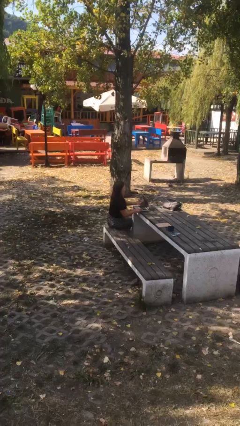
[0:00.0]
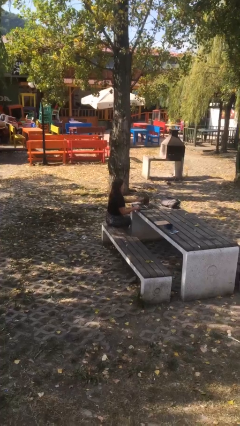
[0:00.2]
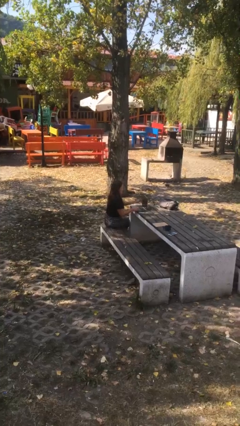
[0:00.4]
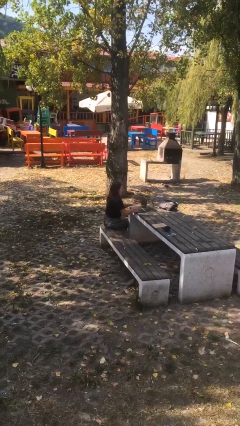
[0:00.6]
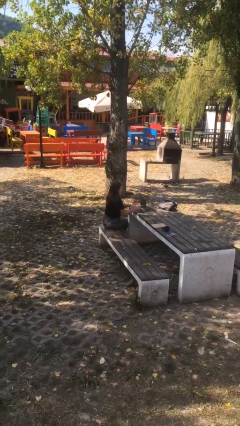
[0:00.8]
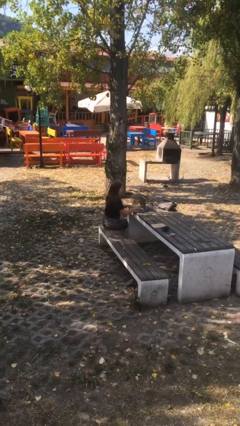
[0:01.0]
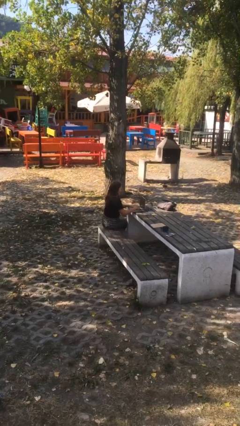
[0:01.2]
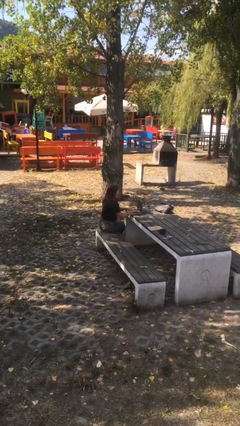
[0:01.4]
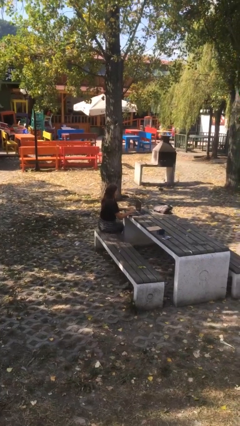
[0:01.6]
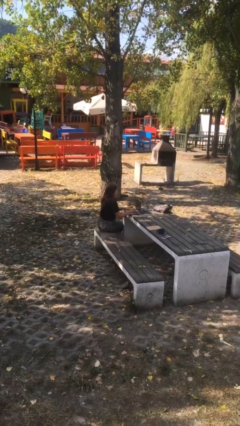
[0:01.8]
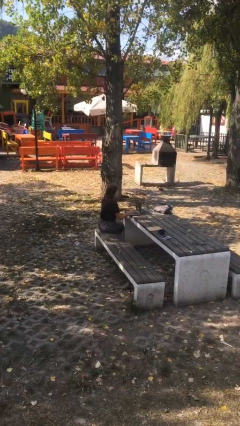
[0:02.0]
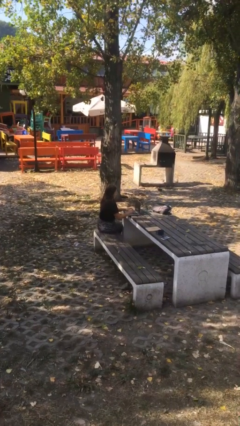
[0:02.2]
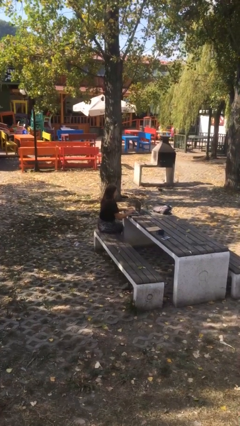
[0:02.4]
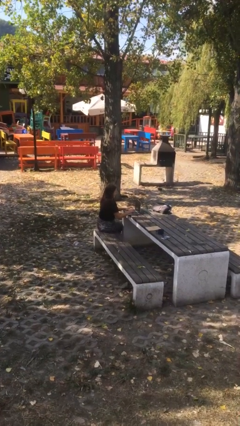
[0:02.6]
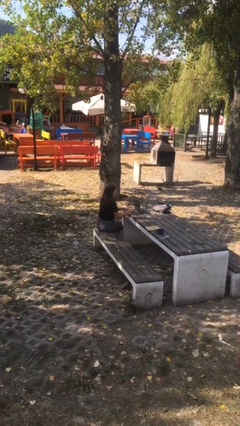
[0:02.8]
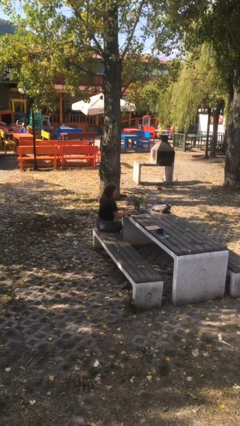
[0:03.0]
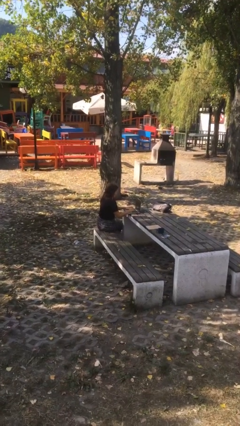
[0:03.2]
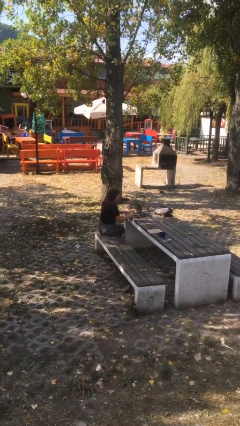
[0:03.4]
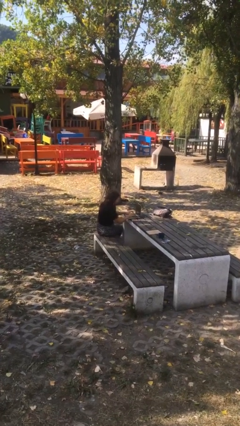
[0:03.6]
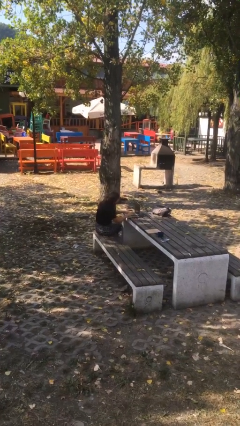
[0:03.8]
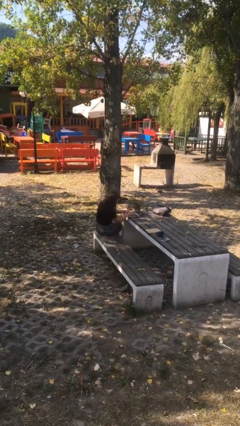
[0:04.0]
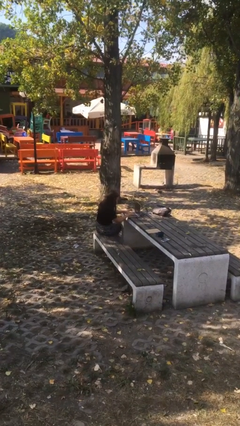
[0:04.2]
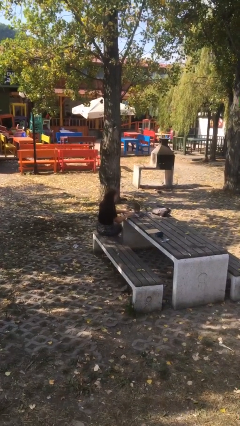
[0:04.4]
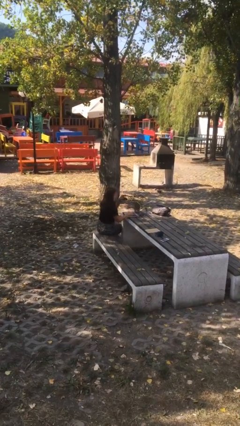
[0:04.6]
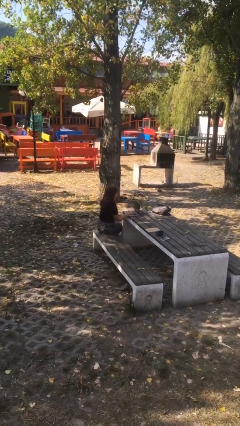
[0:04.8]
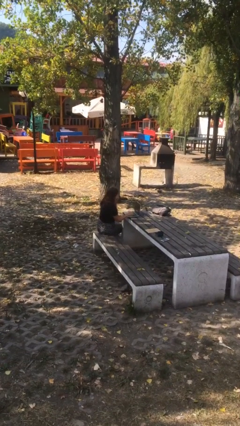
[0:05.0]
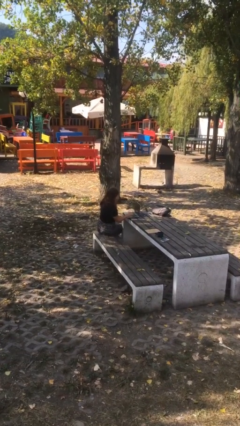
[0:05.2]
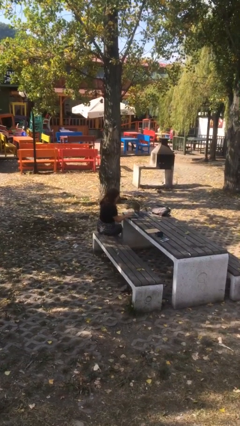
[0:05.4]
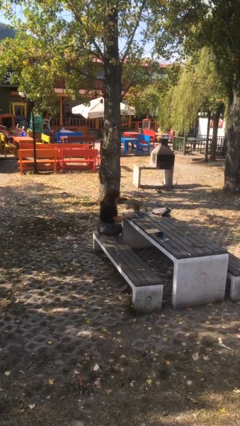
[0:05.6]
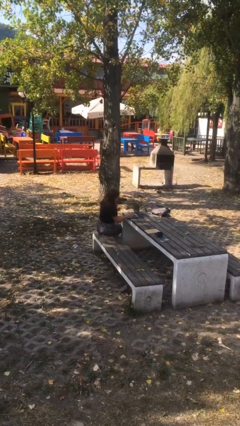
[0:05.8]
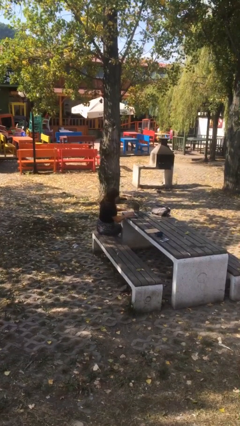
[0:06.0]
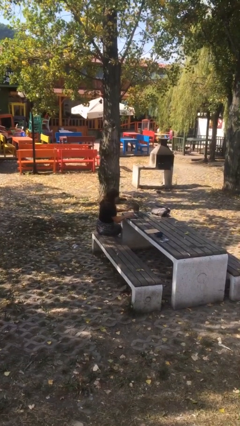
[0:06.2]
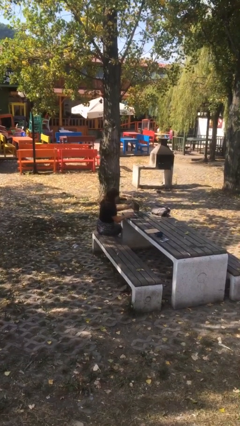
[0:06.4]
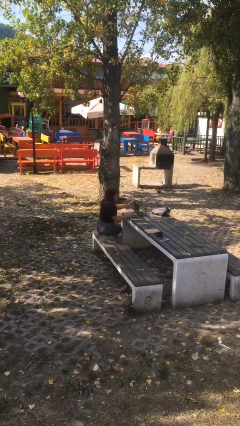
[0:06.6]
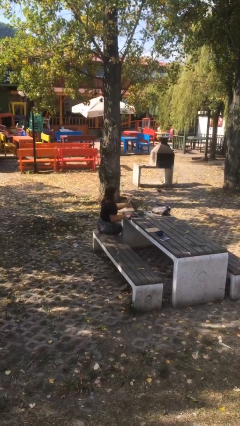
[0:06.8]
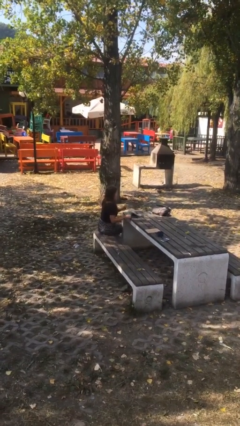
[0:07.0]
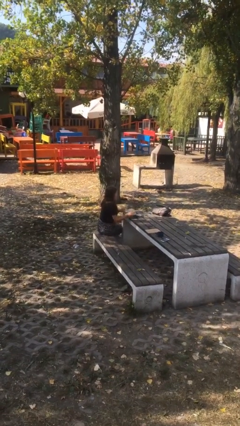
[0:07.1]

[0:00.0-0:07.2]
person interacts with laptop

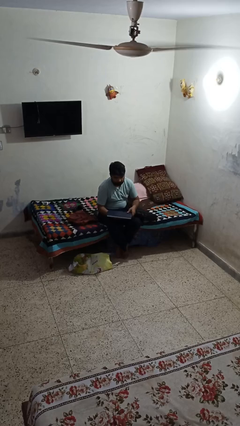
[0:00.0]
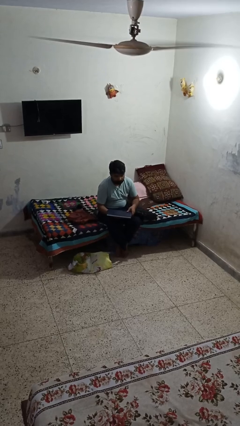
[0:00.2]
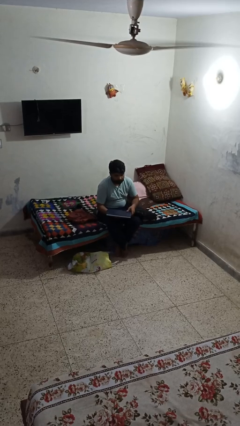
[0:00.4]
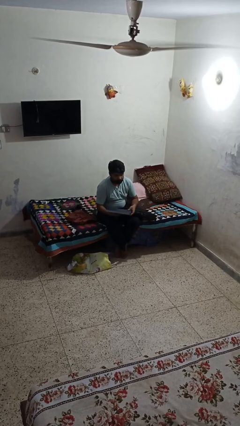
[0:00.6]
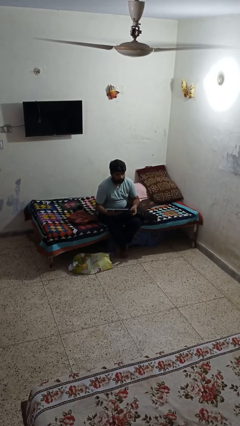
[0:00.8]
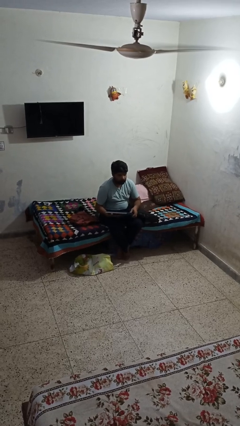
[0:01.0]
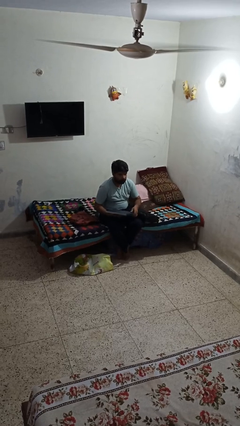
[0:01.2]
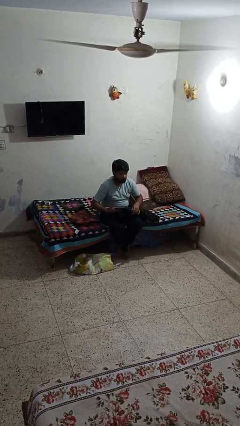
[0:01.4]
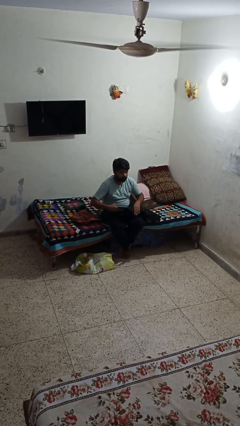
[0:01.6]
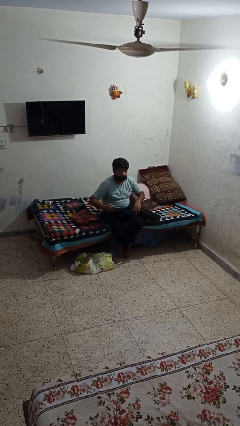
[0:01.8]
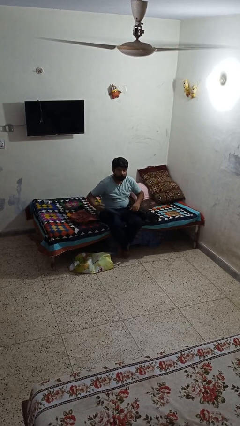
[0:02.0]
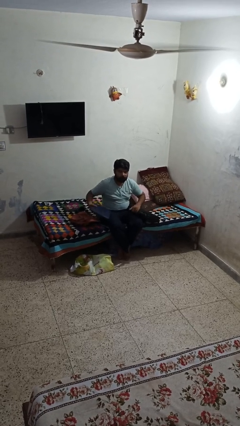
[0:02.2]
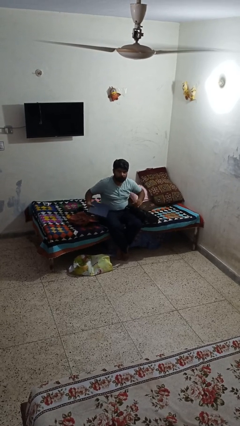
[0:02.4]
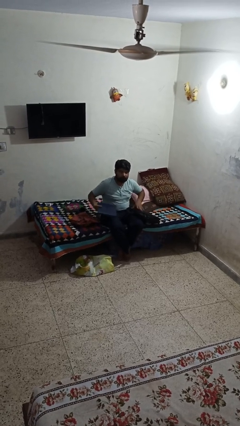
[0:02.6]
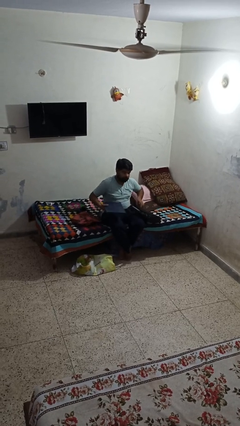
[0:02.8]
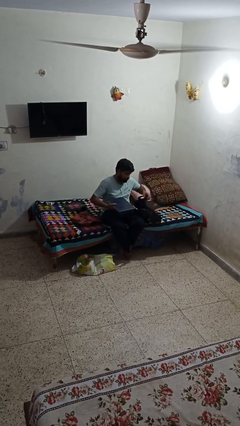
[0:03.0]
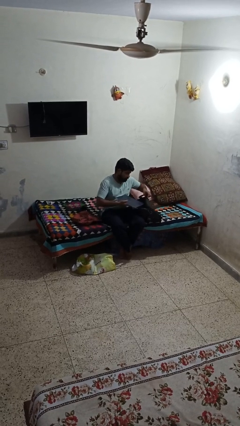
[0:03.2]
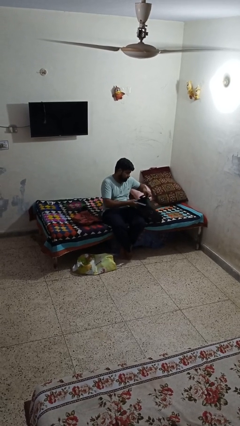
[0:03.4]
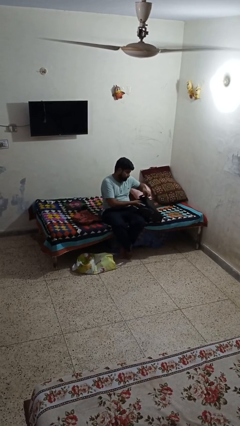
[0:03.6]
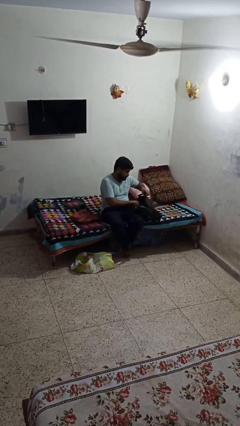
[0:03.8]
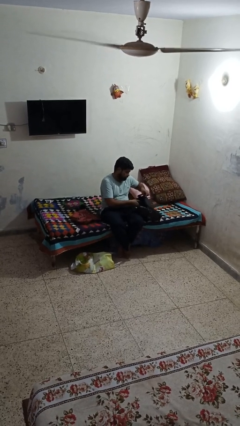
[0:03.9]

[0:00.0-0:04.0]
person puts object into backpack

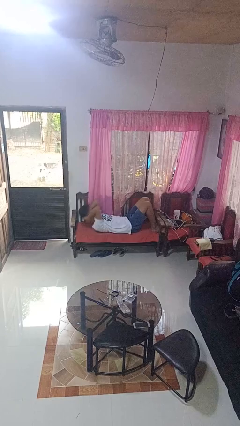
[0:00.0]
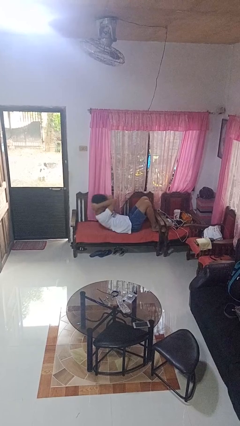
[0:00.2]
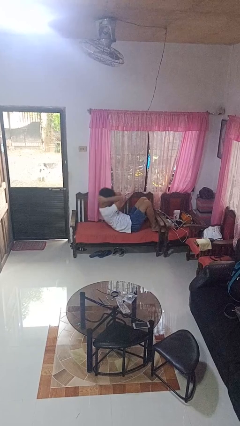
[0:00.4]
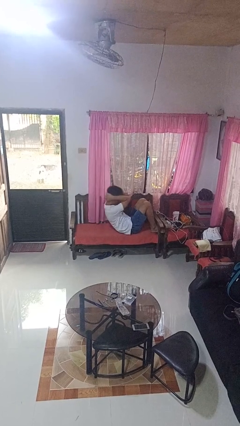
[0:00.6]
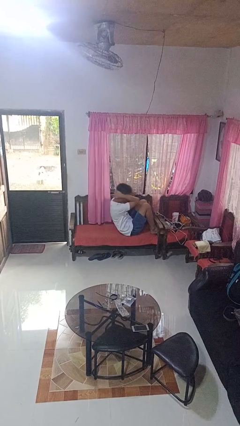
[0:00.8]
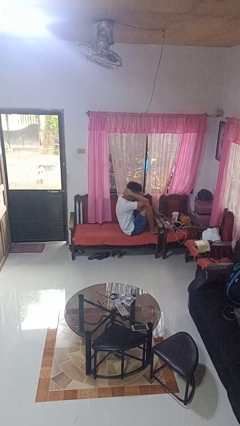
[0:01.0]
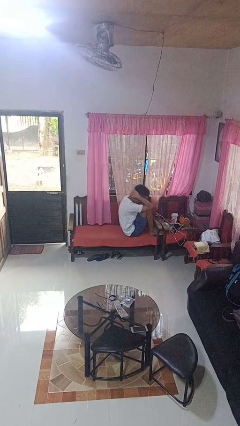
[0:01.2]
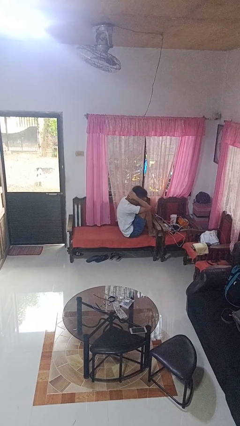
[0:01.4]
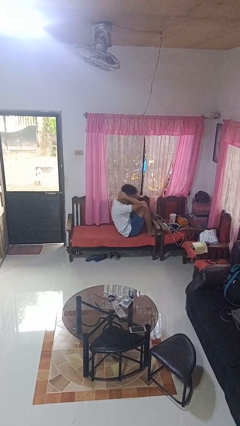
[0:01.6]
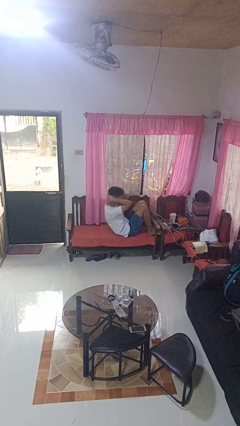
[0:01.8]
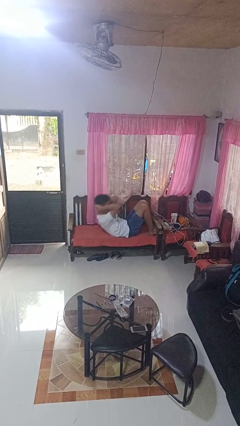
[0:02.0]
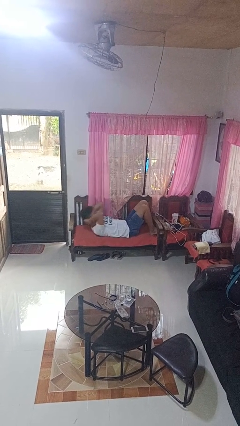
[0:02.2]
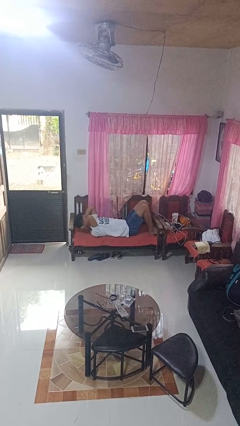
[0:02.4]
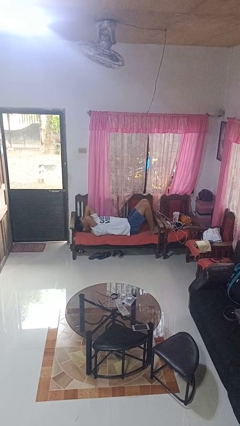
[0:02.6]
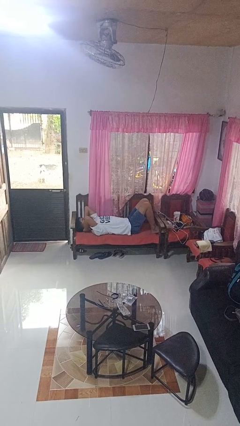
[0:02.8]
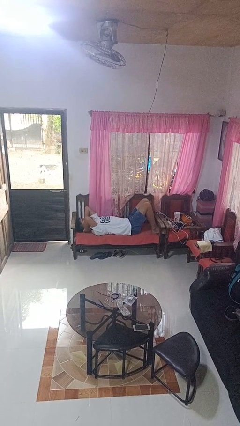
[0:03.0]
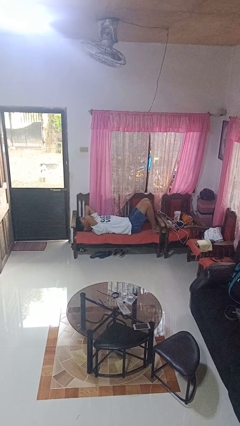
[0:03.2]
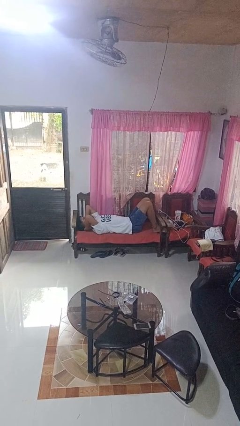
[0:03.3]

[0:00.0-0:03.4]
person exercises with situp

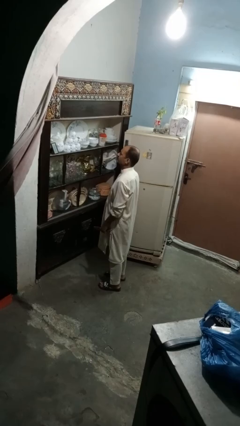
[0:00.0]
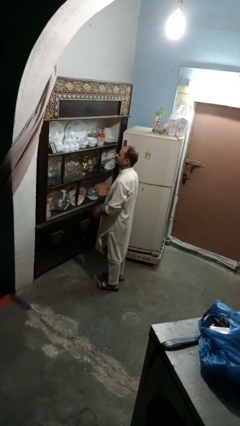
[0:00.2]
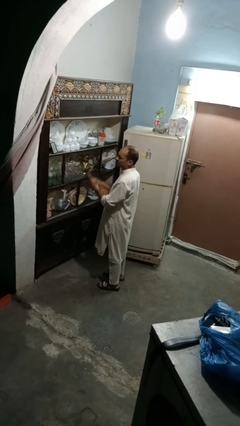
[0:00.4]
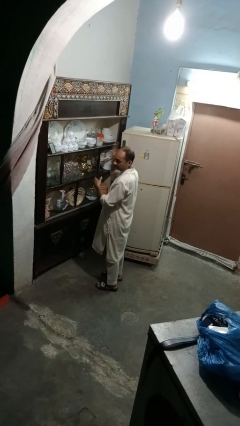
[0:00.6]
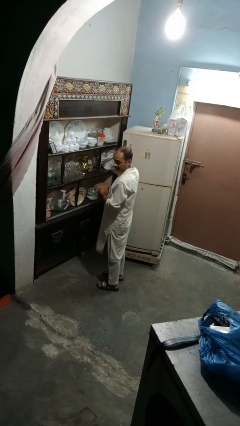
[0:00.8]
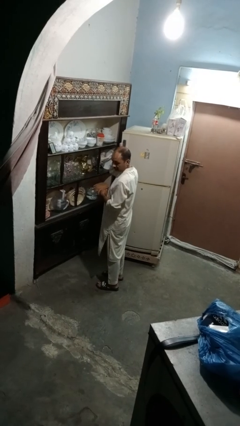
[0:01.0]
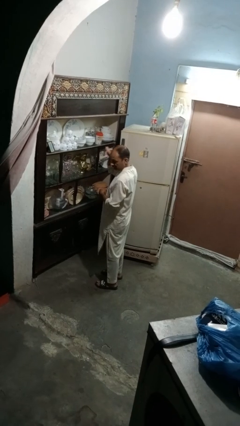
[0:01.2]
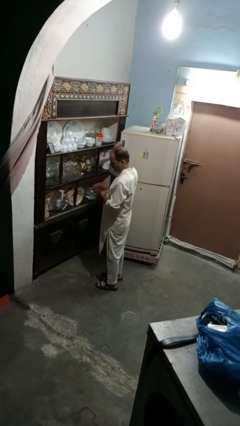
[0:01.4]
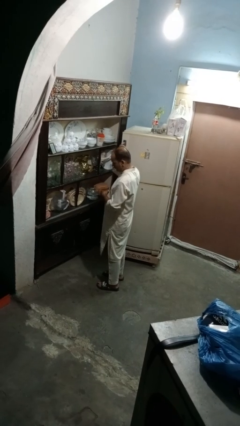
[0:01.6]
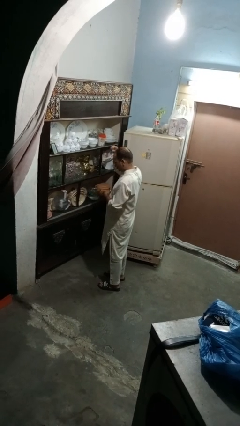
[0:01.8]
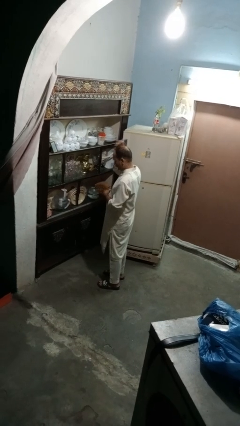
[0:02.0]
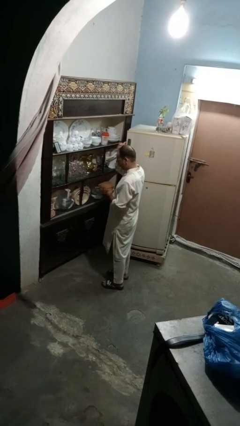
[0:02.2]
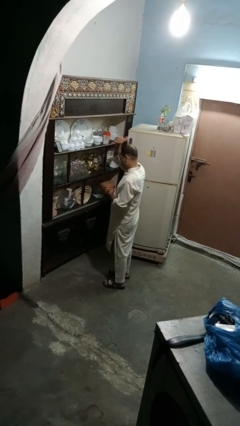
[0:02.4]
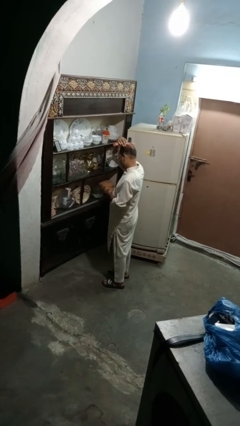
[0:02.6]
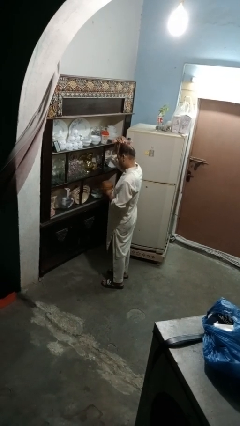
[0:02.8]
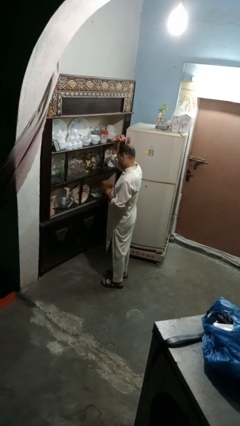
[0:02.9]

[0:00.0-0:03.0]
person brushes hair

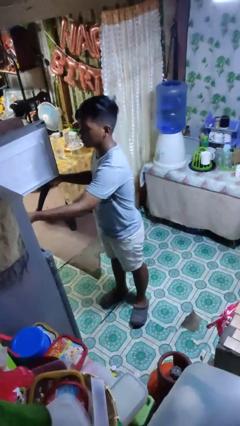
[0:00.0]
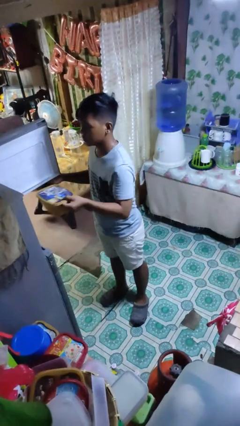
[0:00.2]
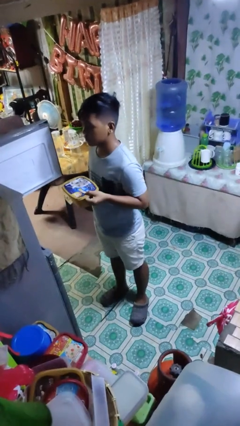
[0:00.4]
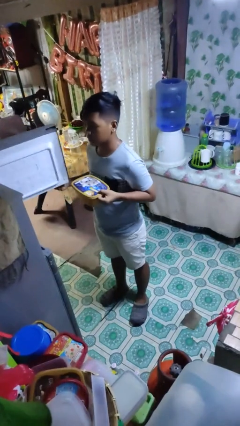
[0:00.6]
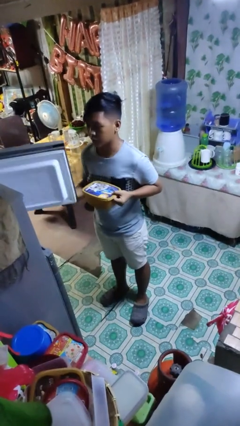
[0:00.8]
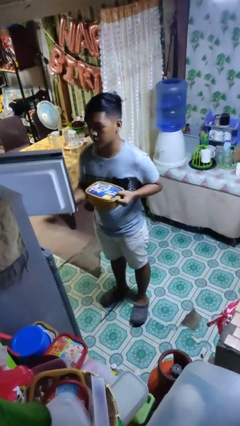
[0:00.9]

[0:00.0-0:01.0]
person takes object from refrigerator
